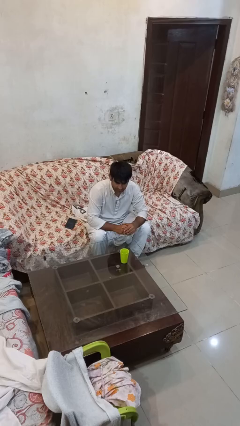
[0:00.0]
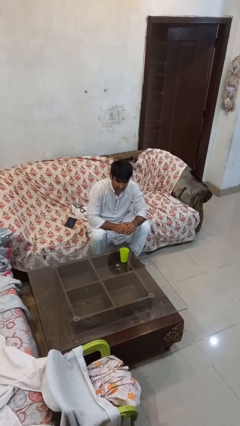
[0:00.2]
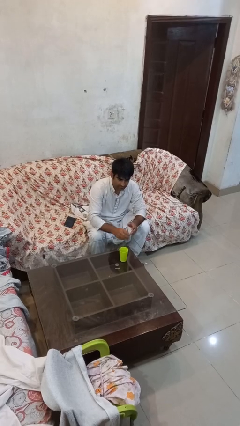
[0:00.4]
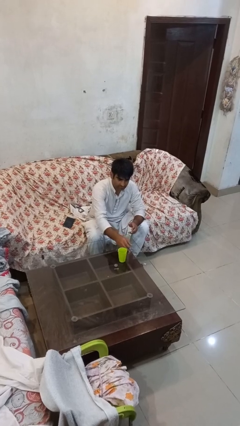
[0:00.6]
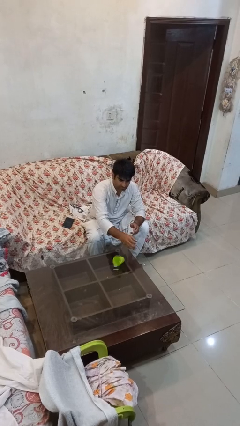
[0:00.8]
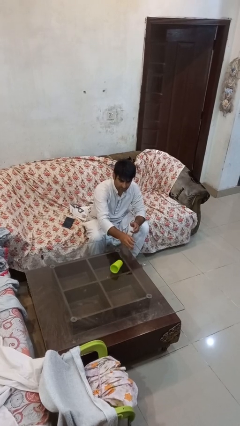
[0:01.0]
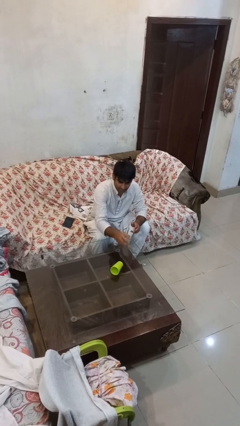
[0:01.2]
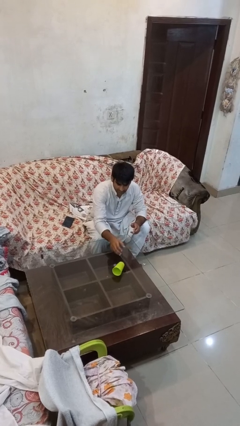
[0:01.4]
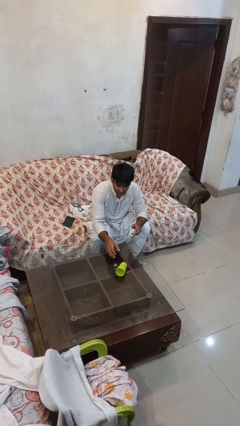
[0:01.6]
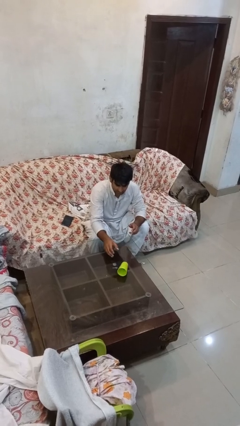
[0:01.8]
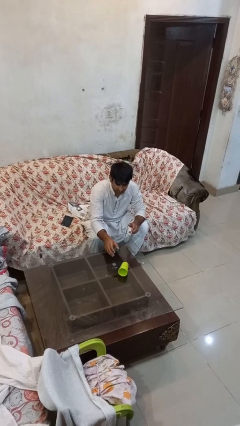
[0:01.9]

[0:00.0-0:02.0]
person knocks over glass

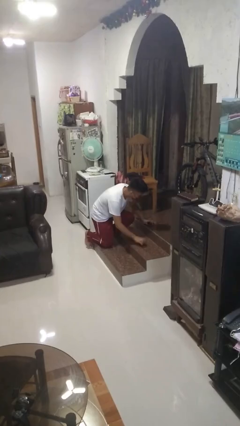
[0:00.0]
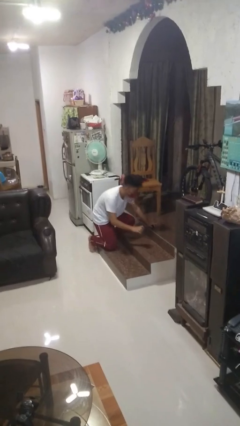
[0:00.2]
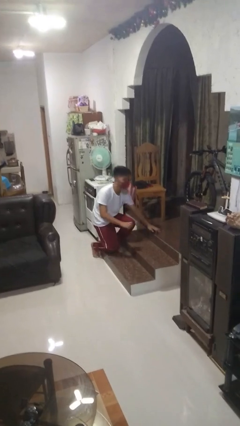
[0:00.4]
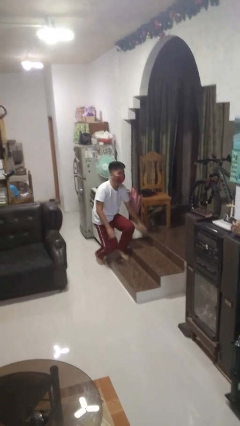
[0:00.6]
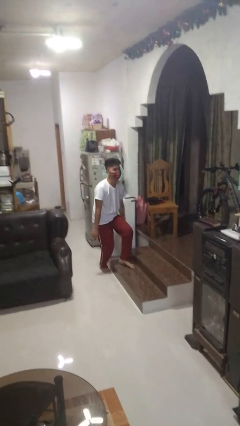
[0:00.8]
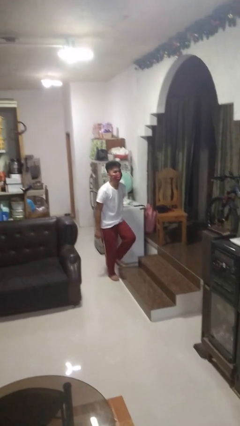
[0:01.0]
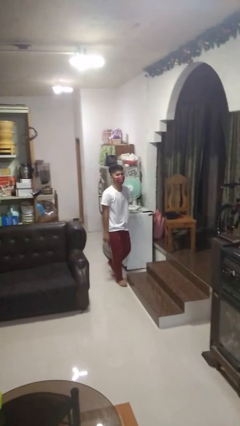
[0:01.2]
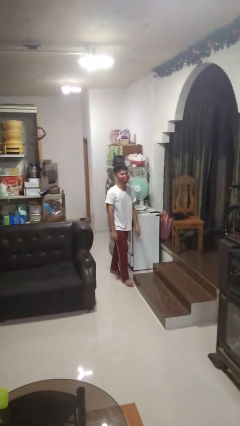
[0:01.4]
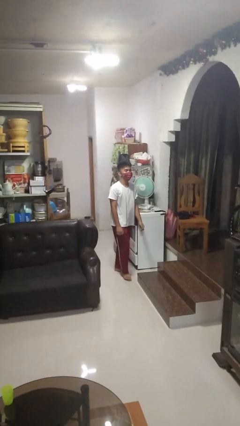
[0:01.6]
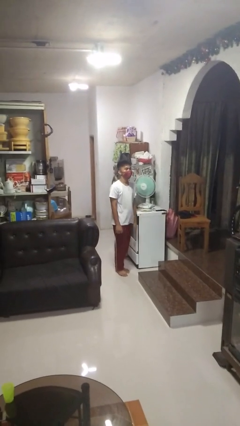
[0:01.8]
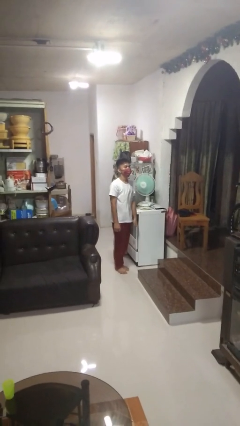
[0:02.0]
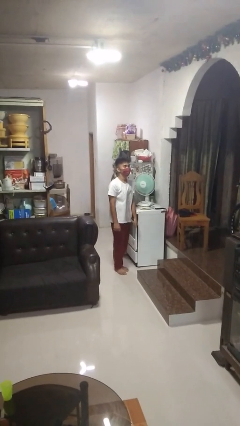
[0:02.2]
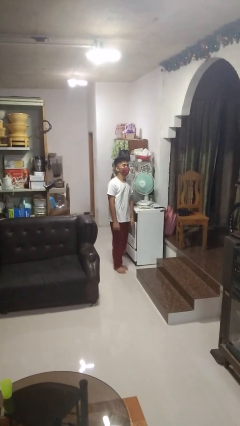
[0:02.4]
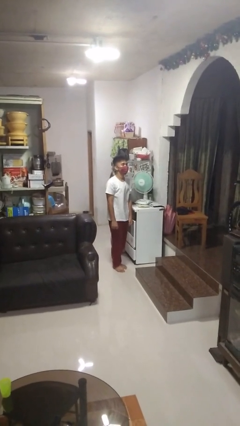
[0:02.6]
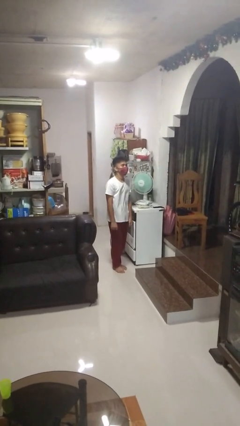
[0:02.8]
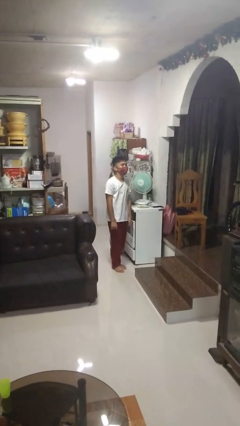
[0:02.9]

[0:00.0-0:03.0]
person stands up from floor

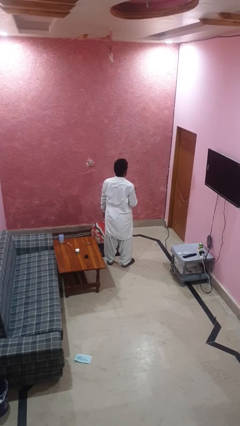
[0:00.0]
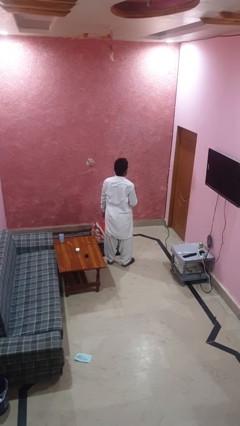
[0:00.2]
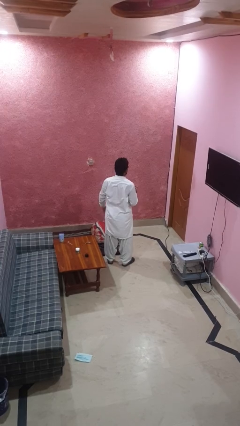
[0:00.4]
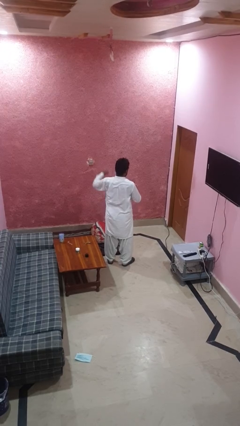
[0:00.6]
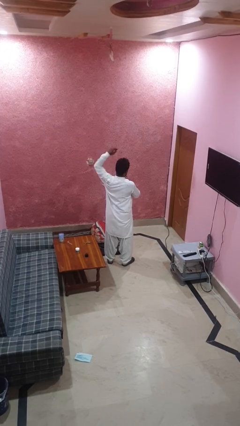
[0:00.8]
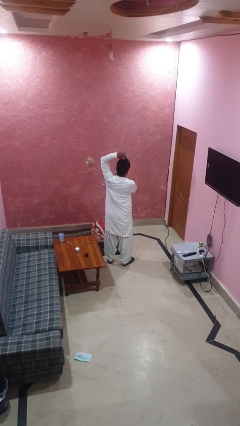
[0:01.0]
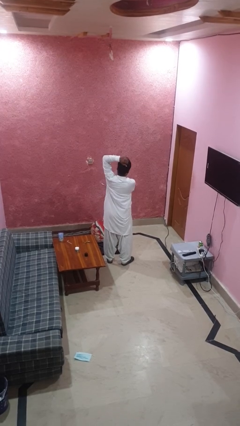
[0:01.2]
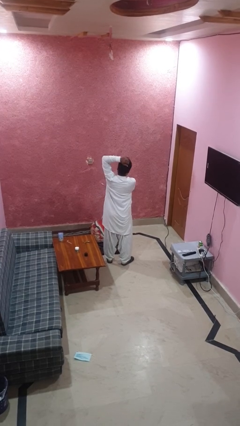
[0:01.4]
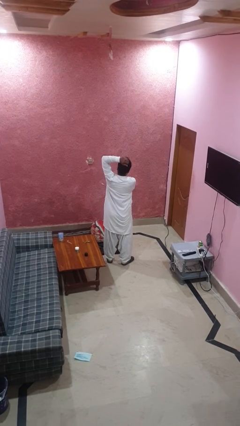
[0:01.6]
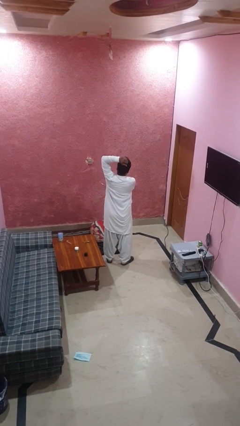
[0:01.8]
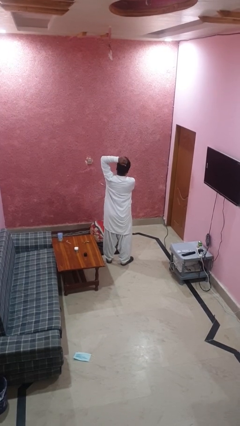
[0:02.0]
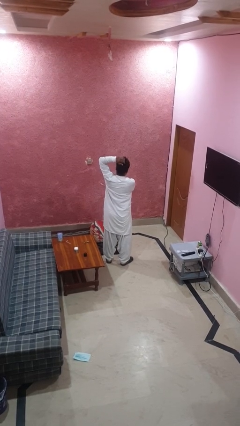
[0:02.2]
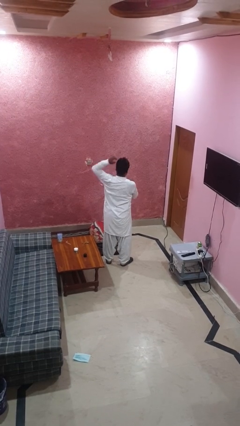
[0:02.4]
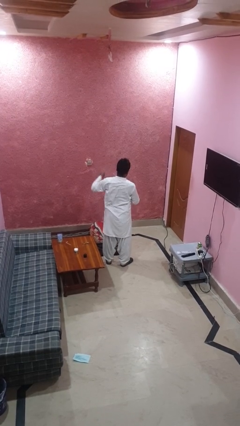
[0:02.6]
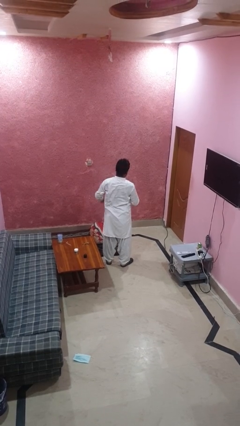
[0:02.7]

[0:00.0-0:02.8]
person applies deodorant

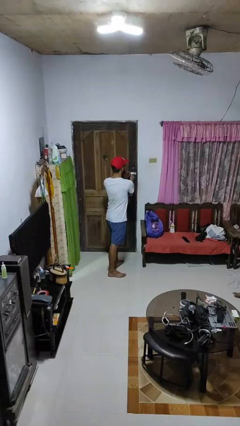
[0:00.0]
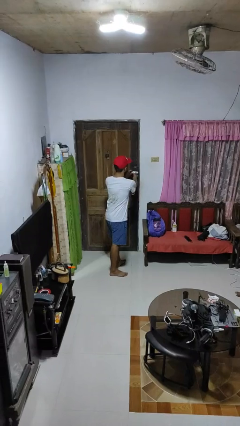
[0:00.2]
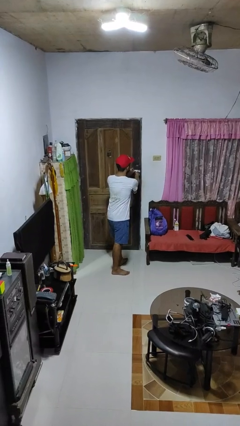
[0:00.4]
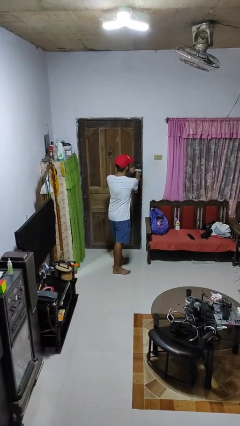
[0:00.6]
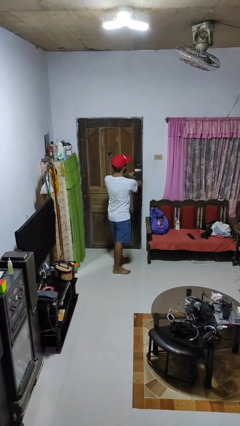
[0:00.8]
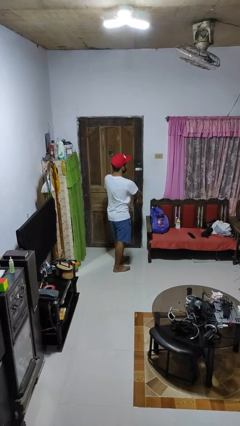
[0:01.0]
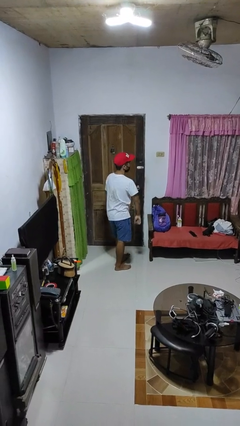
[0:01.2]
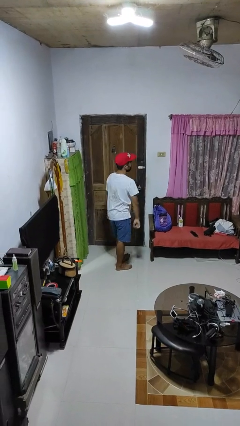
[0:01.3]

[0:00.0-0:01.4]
person locks door with keys

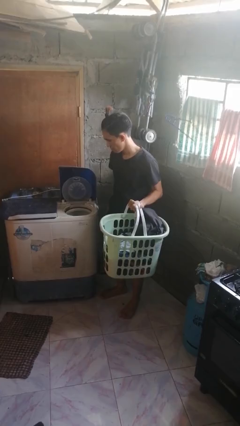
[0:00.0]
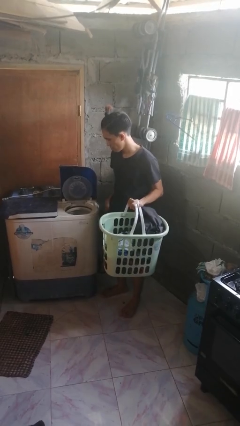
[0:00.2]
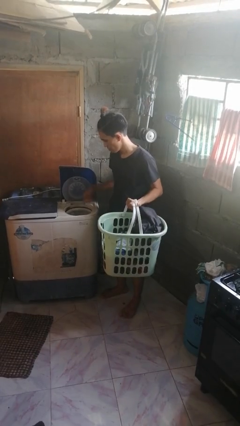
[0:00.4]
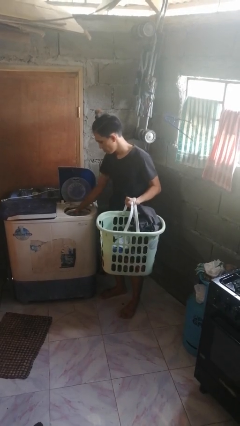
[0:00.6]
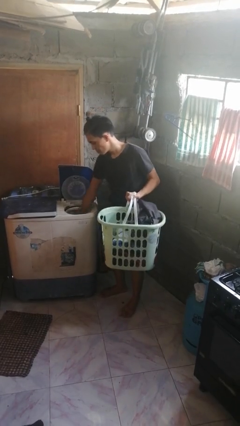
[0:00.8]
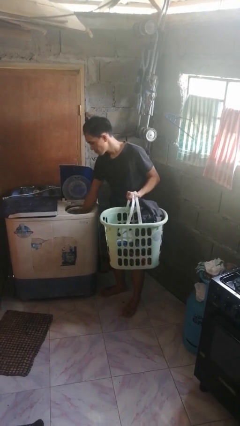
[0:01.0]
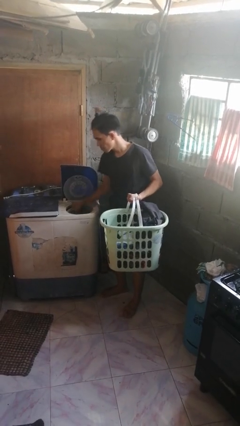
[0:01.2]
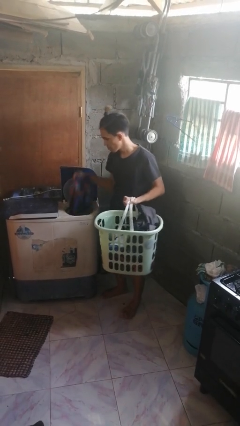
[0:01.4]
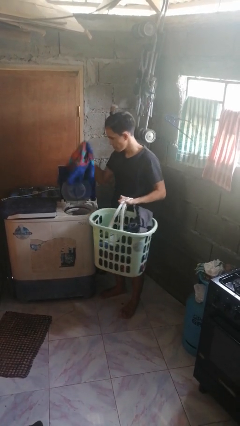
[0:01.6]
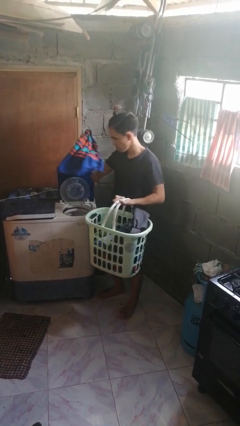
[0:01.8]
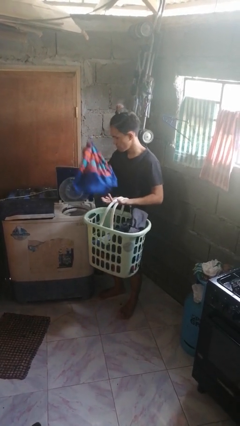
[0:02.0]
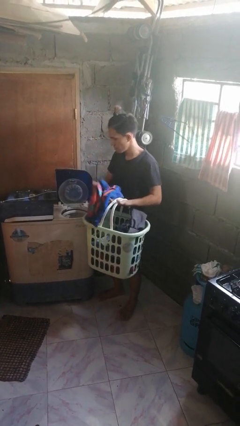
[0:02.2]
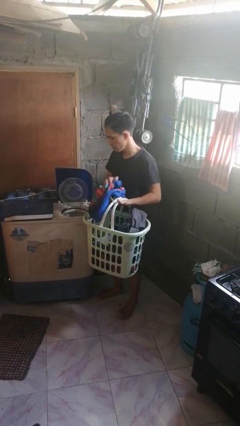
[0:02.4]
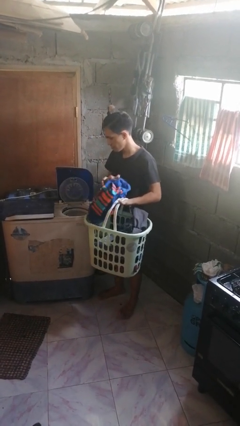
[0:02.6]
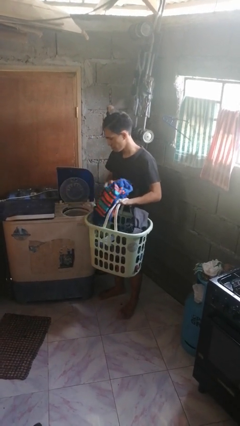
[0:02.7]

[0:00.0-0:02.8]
person unloads dryer

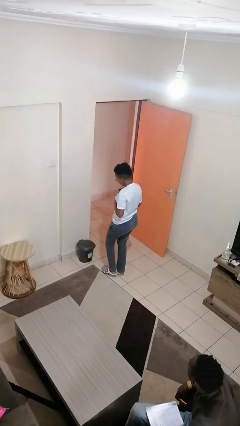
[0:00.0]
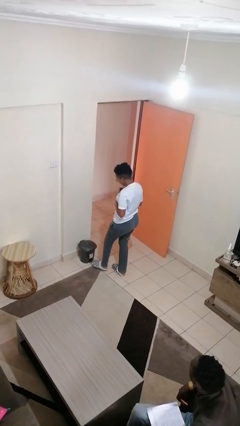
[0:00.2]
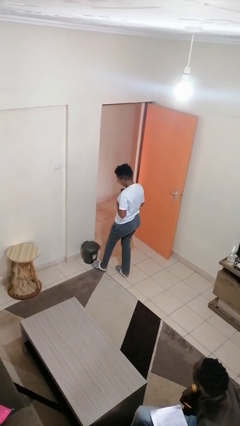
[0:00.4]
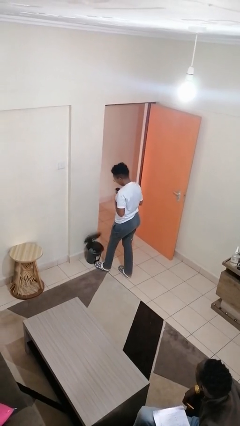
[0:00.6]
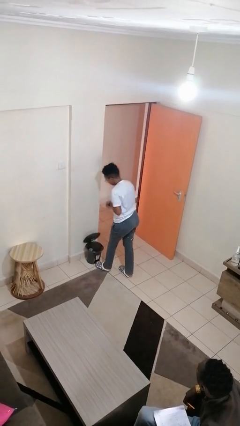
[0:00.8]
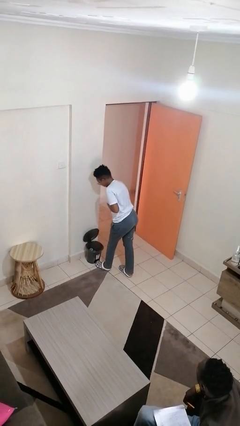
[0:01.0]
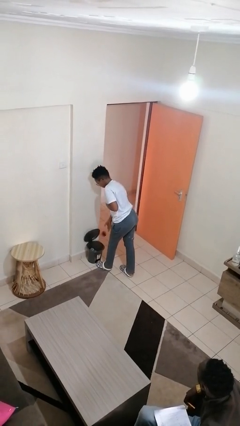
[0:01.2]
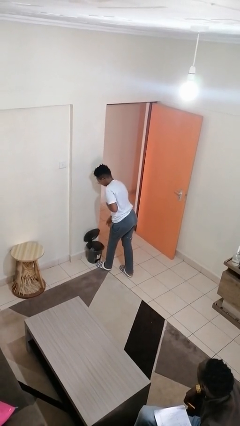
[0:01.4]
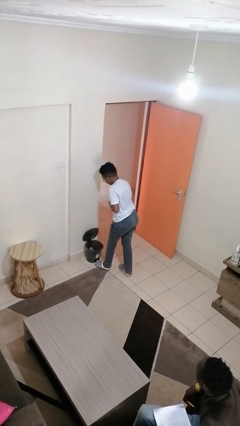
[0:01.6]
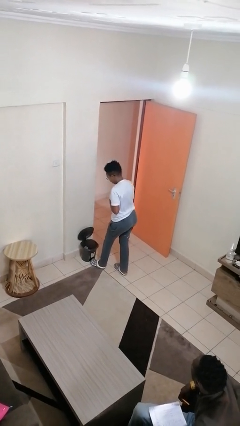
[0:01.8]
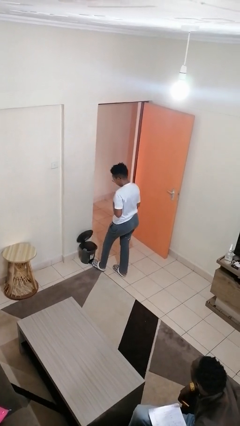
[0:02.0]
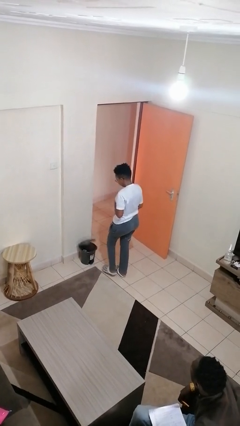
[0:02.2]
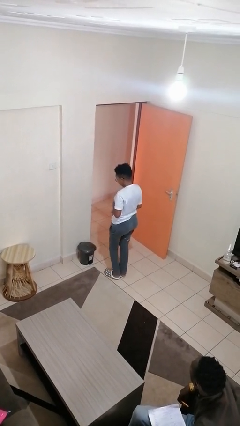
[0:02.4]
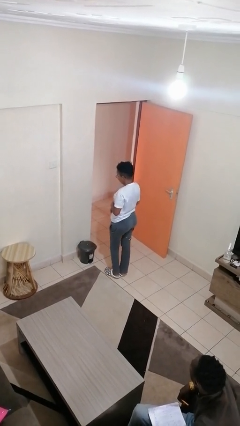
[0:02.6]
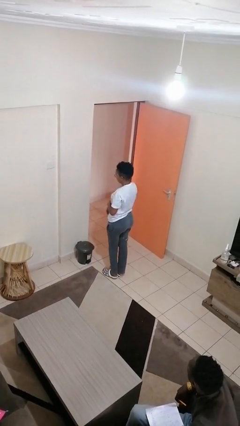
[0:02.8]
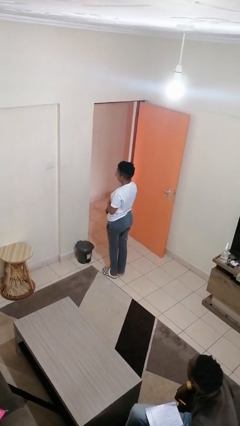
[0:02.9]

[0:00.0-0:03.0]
person discards trash

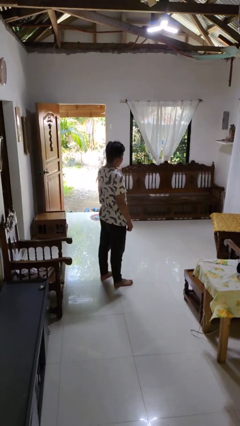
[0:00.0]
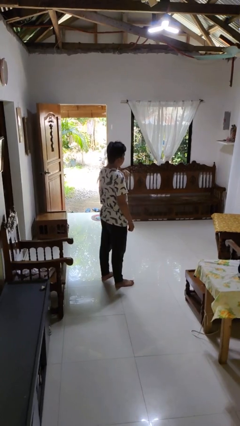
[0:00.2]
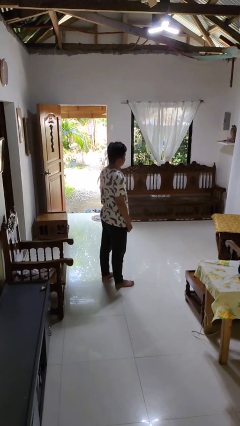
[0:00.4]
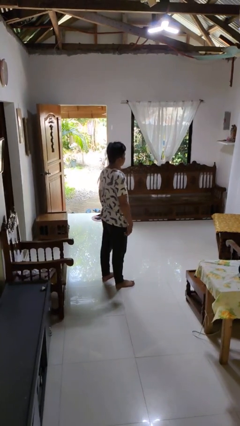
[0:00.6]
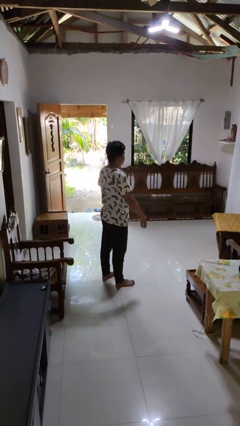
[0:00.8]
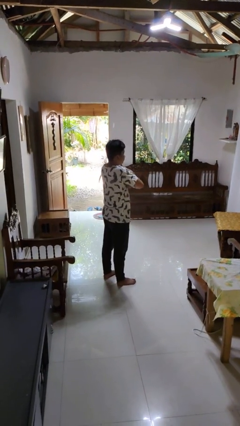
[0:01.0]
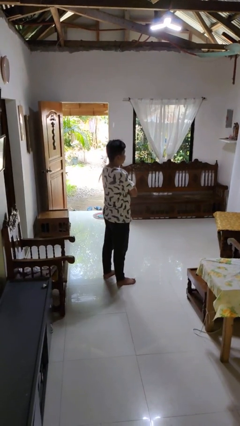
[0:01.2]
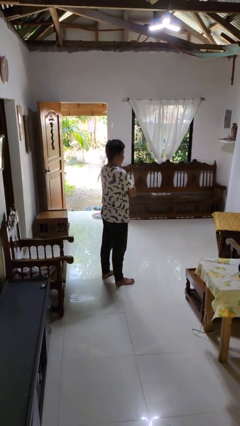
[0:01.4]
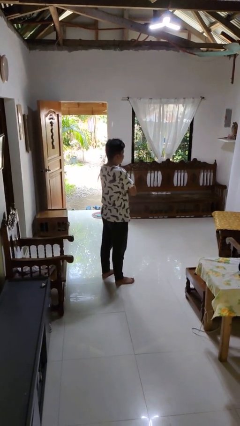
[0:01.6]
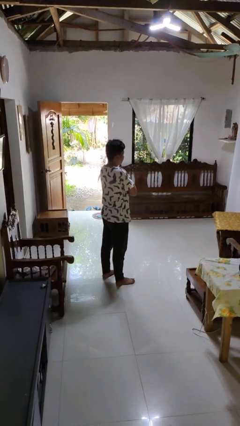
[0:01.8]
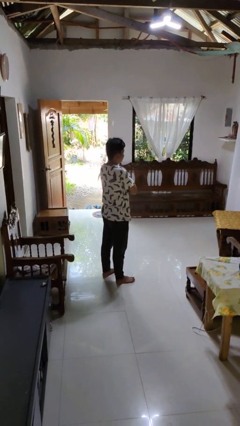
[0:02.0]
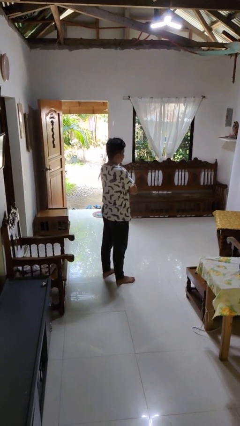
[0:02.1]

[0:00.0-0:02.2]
person crosses arms
